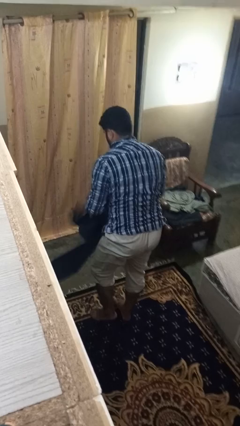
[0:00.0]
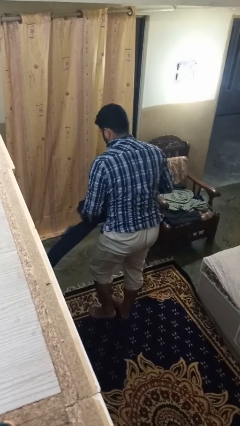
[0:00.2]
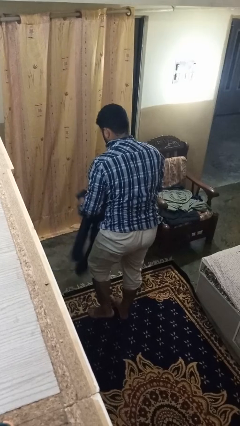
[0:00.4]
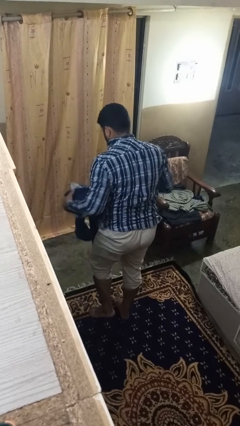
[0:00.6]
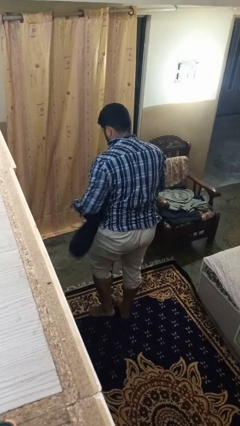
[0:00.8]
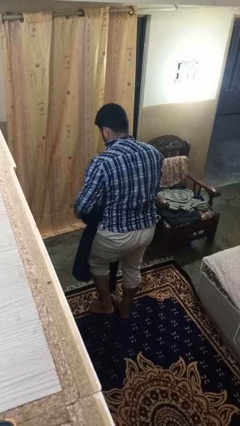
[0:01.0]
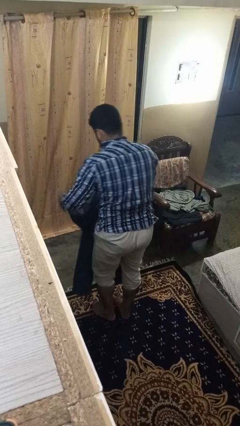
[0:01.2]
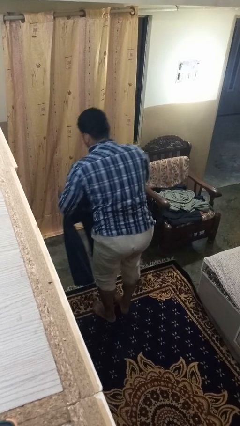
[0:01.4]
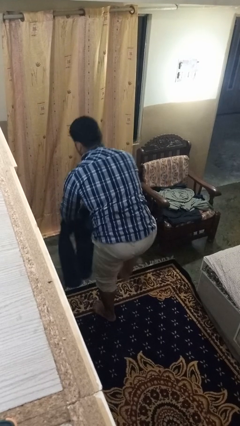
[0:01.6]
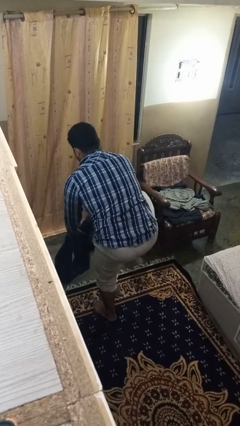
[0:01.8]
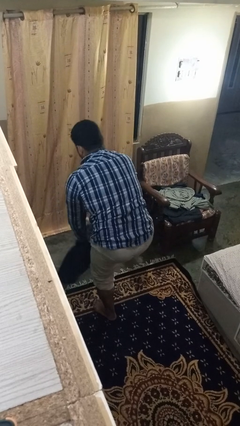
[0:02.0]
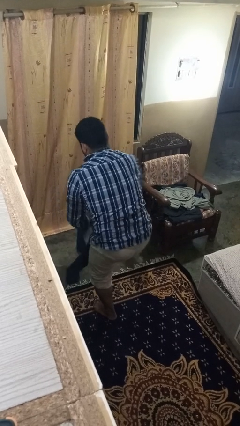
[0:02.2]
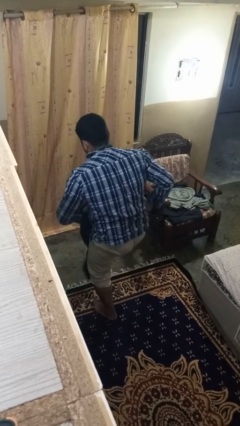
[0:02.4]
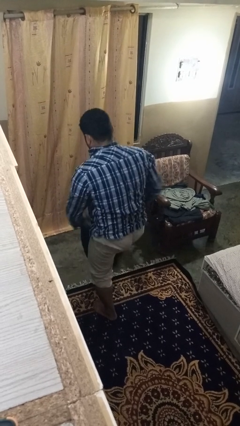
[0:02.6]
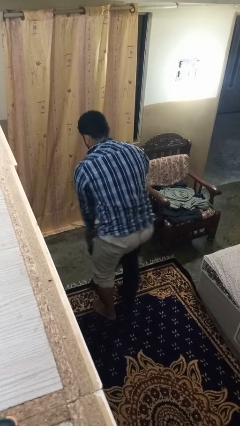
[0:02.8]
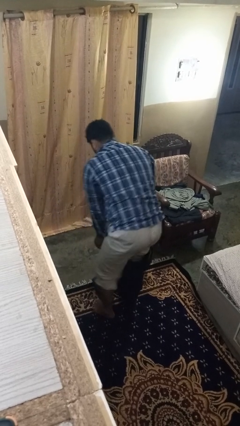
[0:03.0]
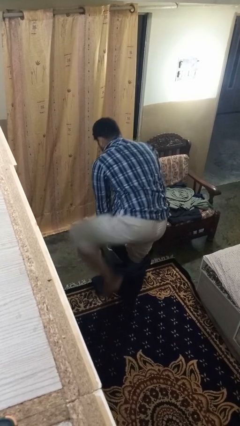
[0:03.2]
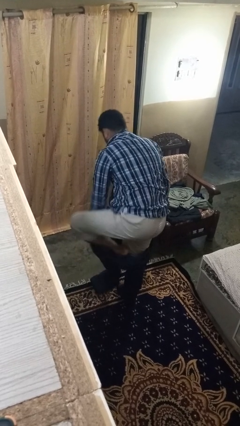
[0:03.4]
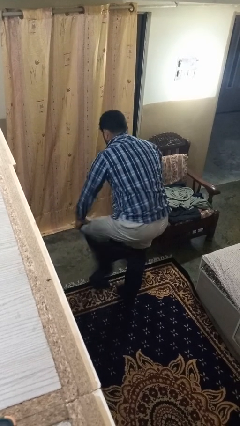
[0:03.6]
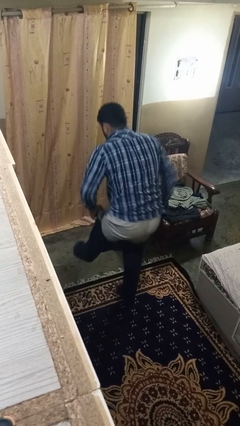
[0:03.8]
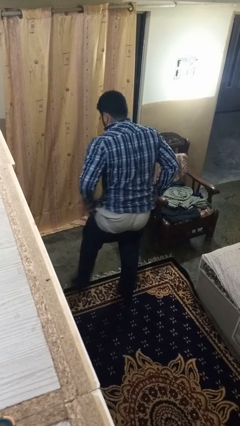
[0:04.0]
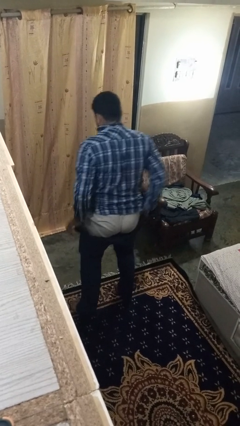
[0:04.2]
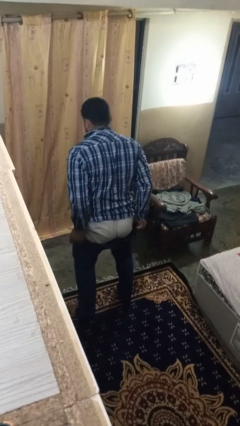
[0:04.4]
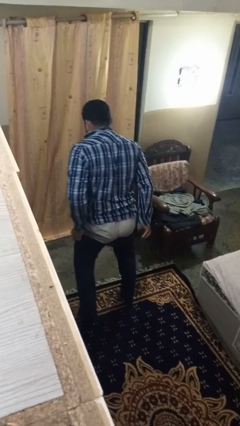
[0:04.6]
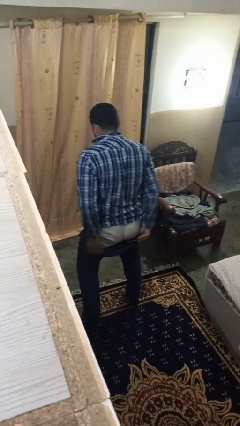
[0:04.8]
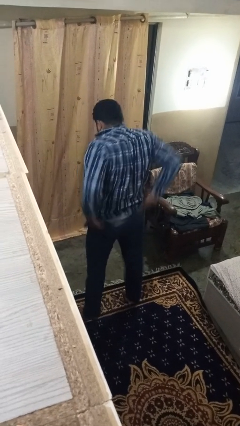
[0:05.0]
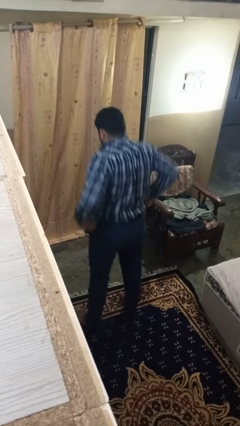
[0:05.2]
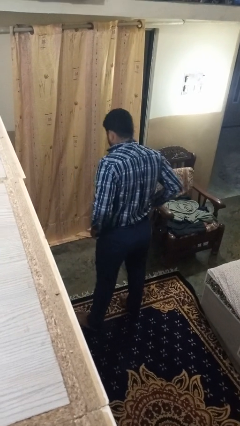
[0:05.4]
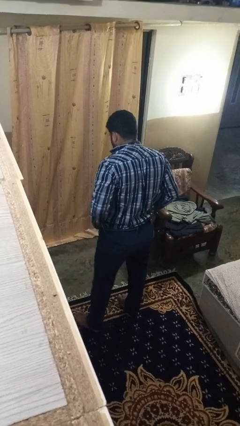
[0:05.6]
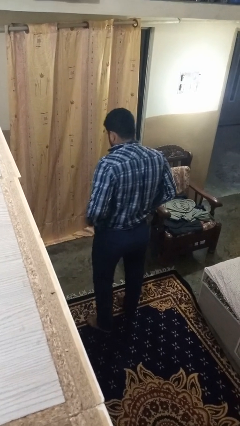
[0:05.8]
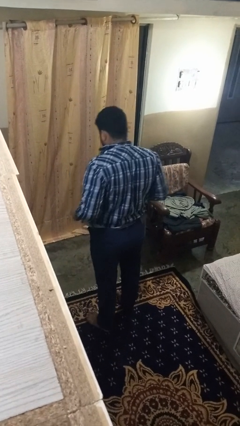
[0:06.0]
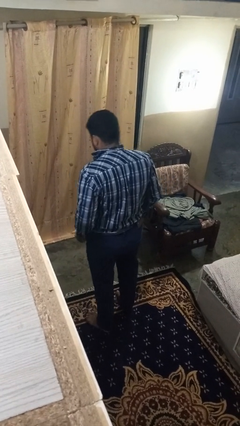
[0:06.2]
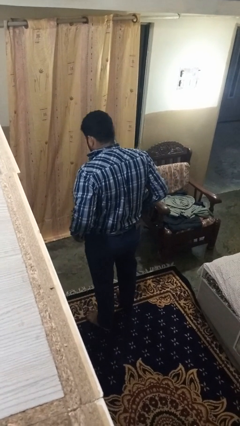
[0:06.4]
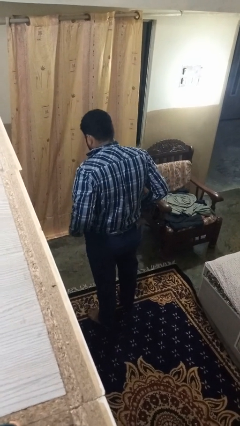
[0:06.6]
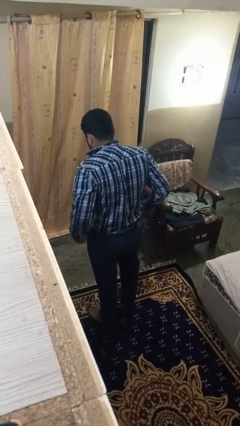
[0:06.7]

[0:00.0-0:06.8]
person puts on pants

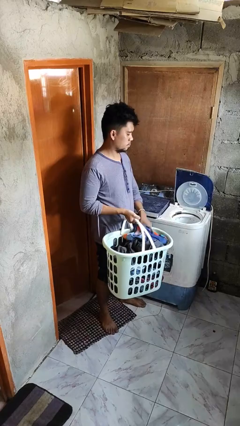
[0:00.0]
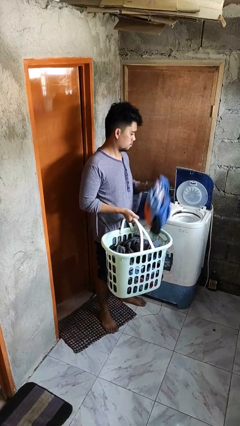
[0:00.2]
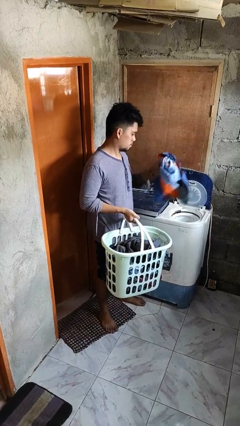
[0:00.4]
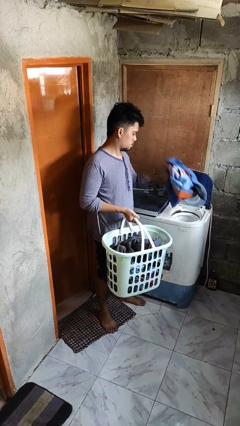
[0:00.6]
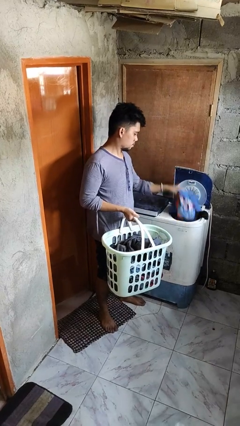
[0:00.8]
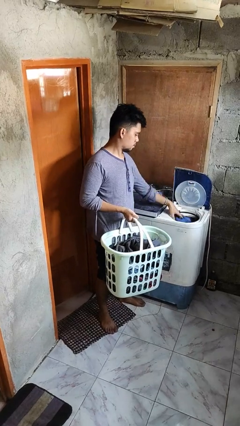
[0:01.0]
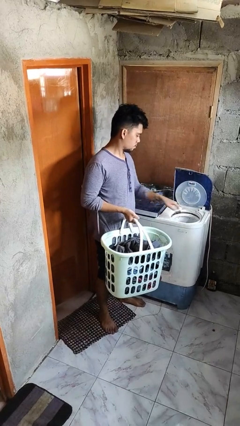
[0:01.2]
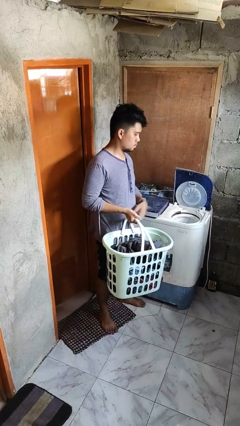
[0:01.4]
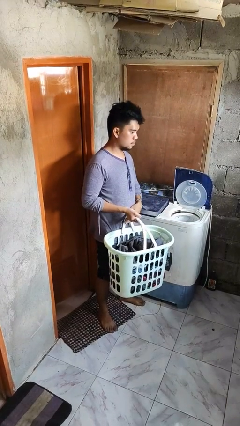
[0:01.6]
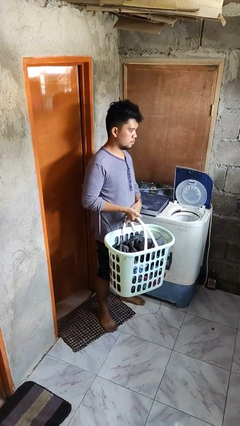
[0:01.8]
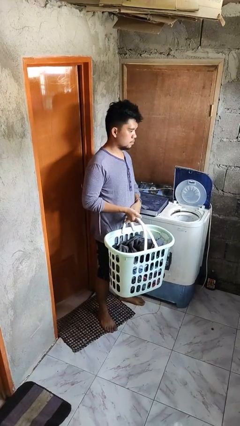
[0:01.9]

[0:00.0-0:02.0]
person loads dryer

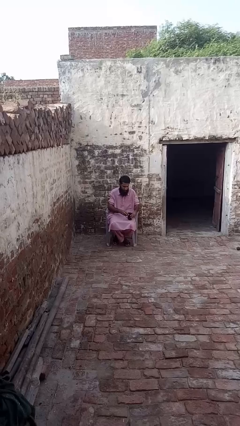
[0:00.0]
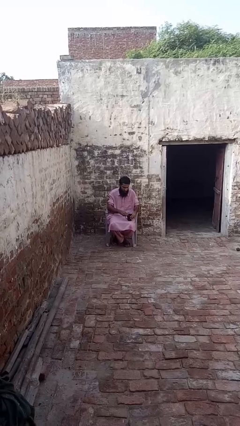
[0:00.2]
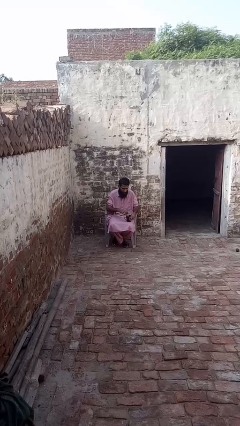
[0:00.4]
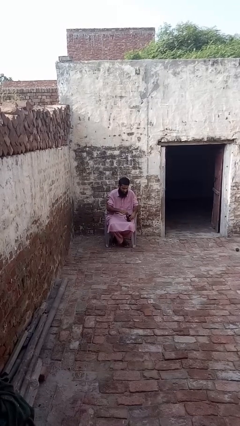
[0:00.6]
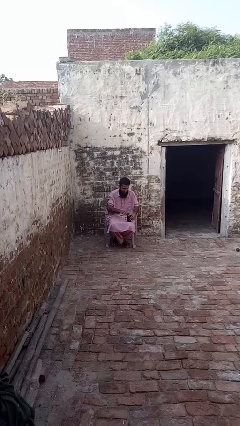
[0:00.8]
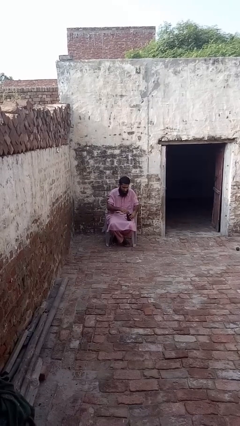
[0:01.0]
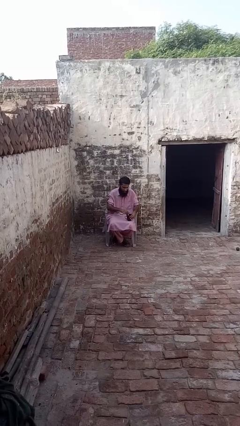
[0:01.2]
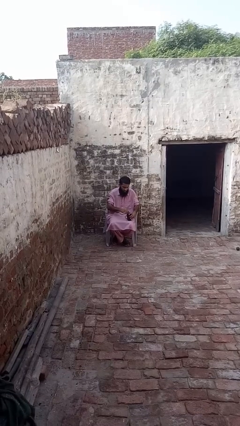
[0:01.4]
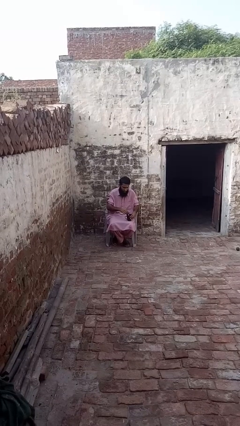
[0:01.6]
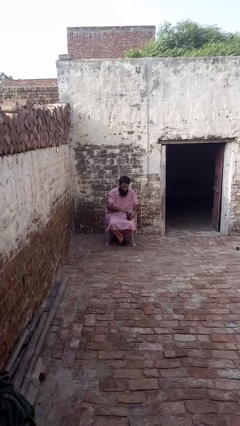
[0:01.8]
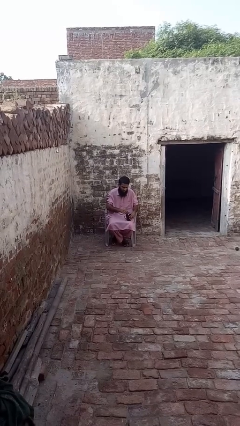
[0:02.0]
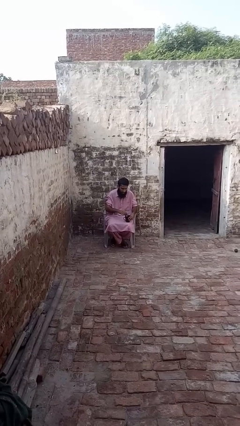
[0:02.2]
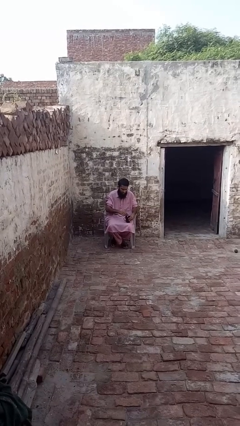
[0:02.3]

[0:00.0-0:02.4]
person stirs mug

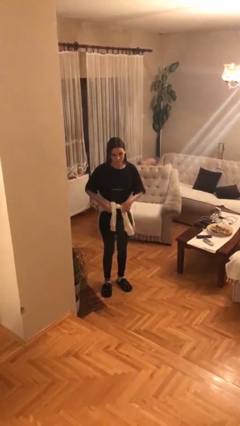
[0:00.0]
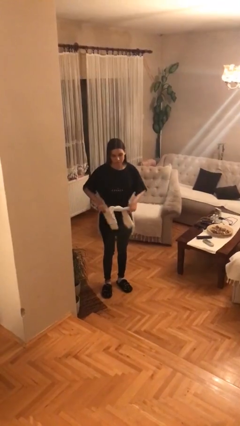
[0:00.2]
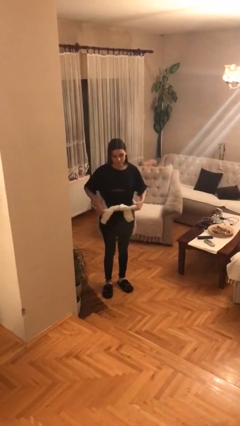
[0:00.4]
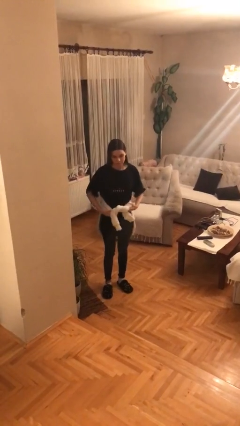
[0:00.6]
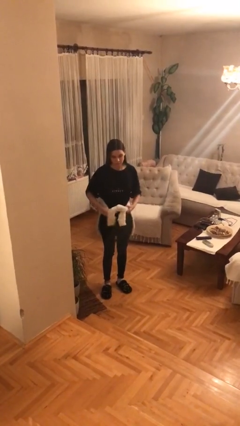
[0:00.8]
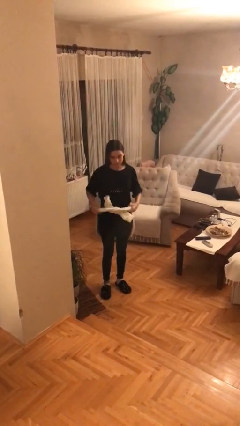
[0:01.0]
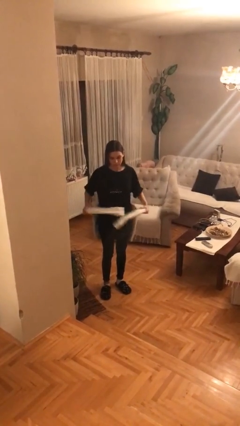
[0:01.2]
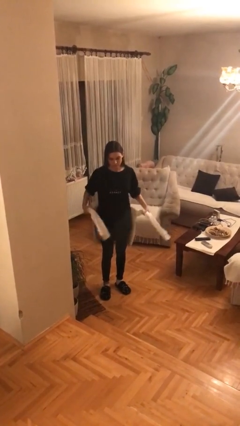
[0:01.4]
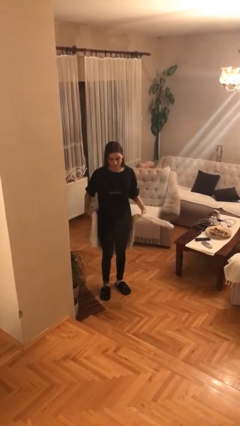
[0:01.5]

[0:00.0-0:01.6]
person unties jacket around waist

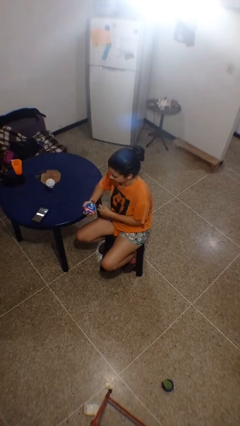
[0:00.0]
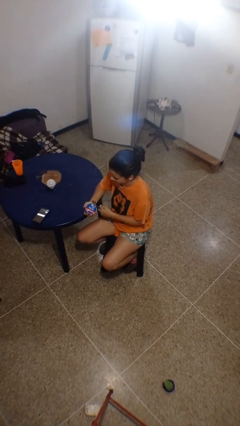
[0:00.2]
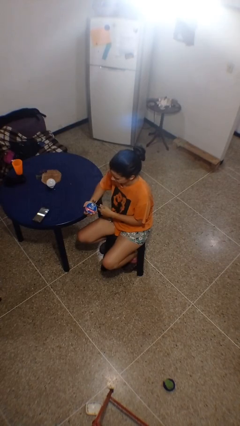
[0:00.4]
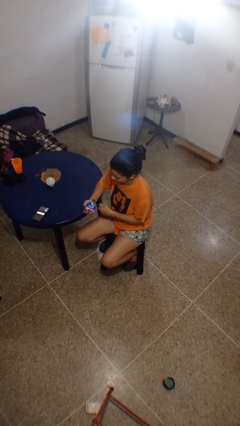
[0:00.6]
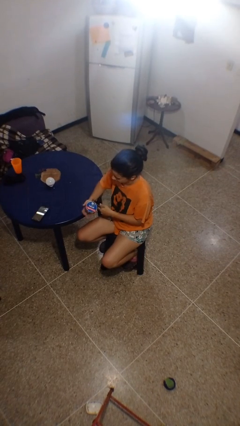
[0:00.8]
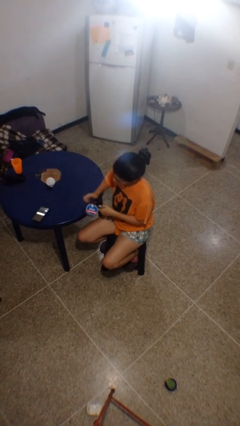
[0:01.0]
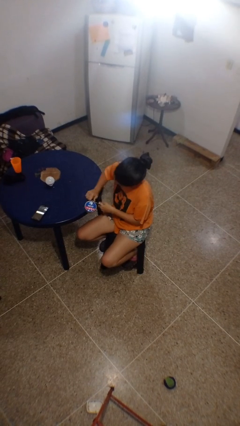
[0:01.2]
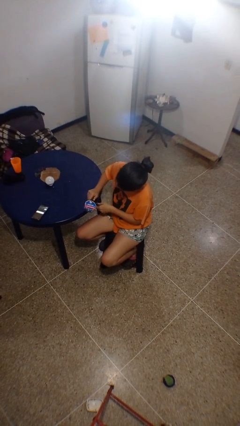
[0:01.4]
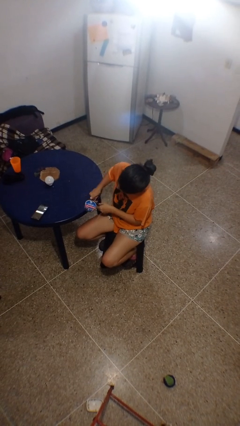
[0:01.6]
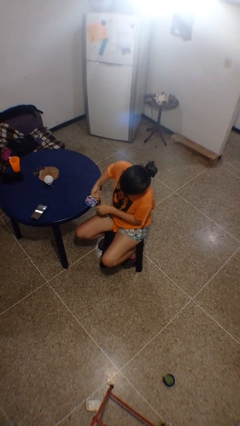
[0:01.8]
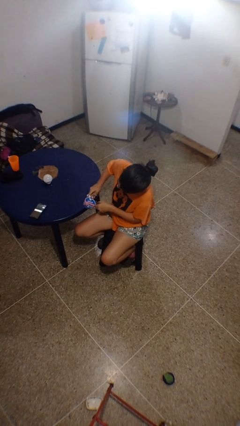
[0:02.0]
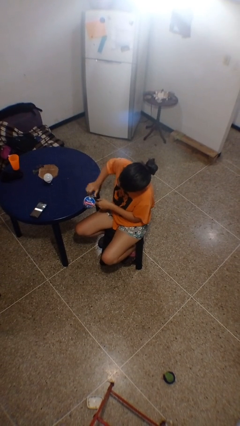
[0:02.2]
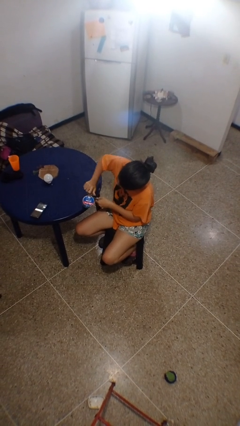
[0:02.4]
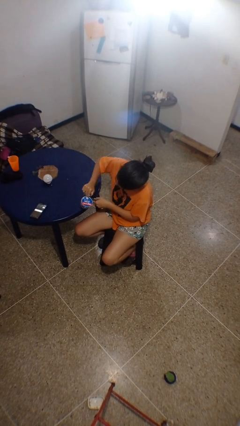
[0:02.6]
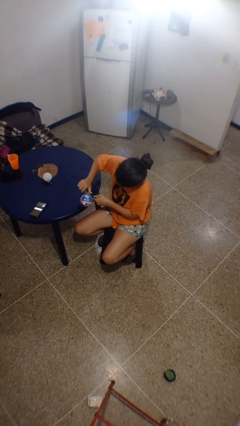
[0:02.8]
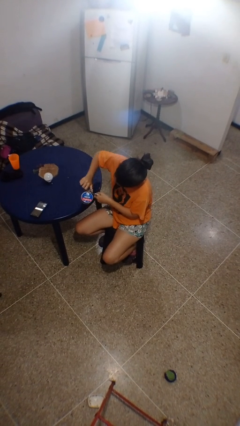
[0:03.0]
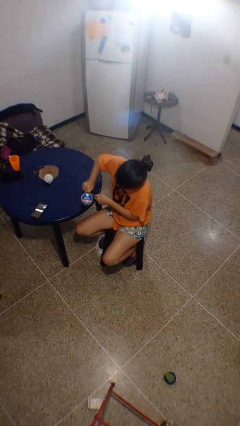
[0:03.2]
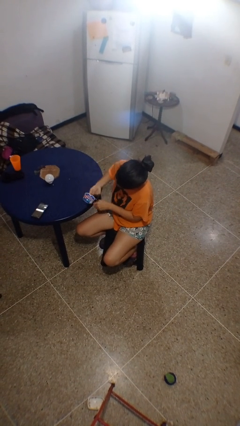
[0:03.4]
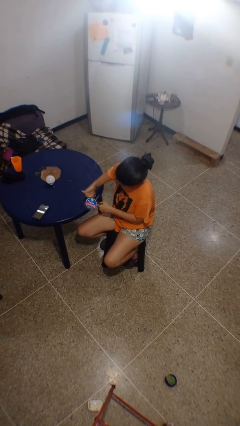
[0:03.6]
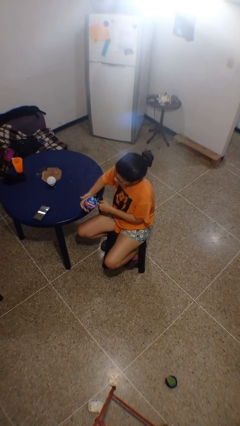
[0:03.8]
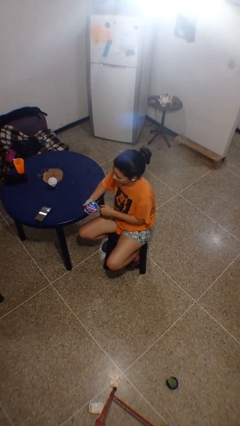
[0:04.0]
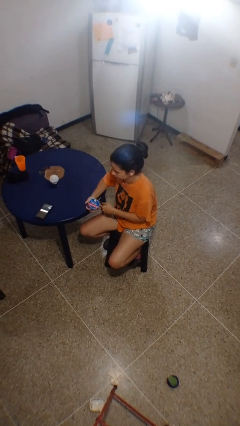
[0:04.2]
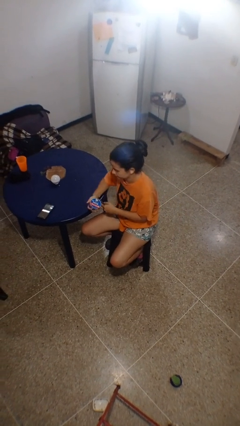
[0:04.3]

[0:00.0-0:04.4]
person opens can with can opener

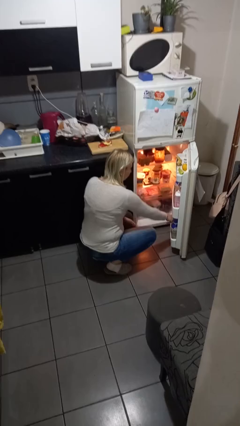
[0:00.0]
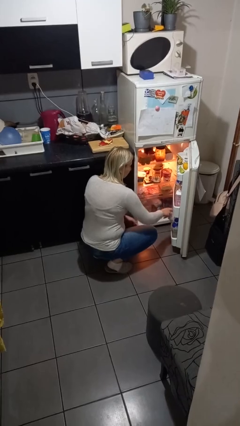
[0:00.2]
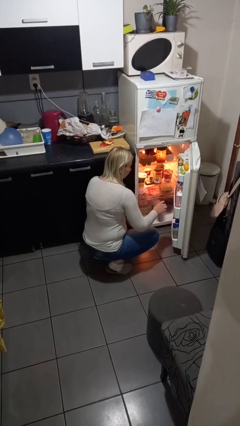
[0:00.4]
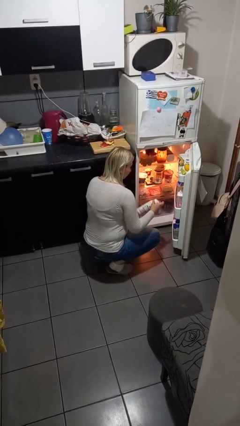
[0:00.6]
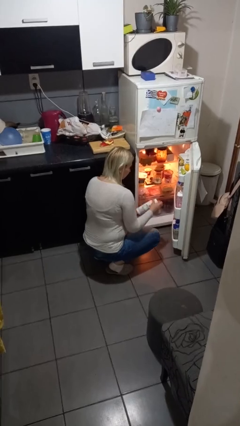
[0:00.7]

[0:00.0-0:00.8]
person takes object from refrigerator
